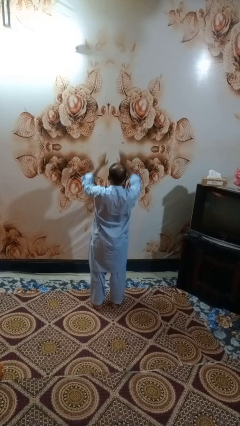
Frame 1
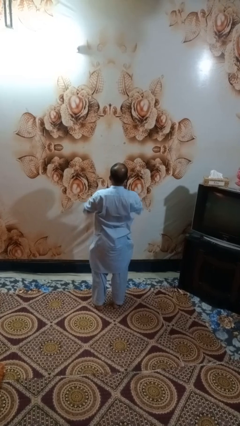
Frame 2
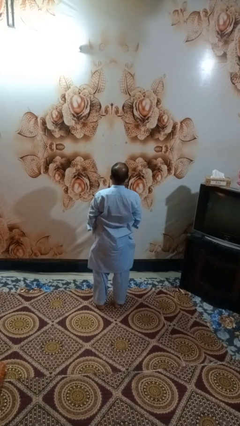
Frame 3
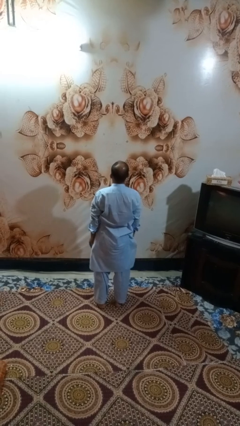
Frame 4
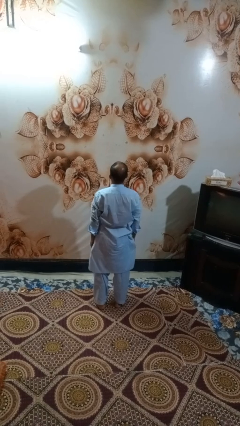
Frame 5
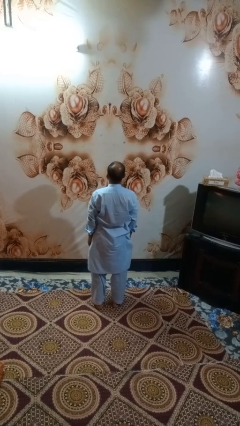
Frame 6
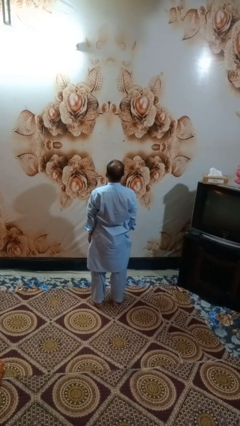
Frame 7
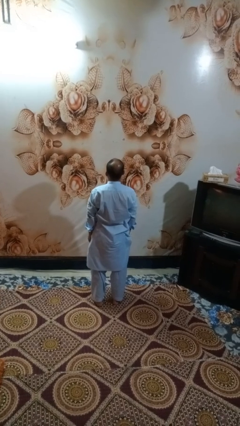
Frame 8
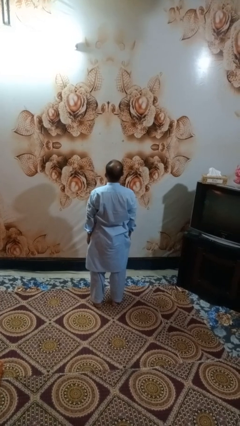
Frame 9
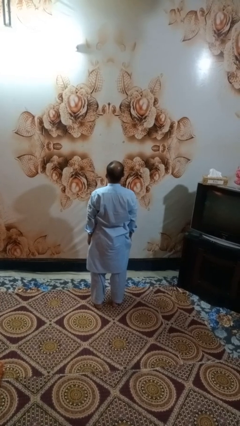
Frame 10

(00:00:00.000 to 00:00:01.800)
person gestures swipe down

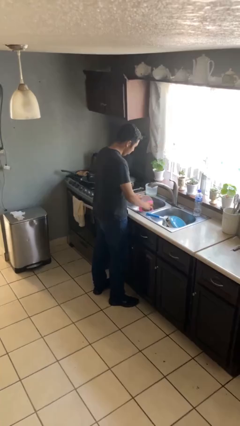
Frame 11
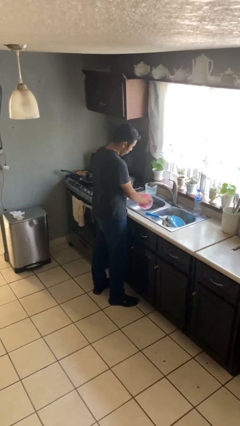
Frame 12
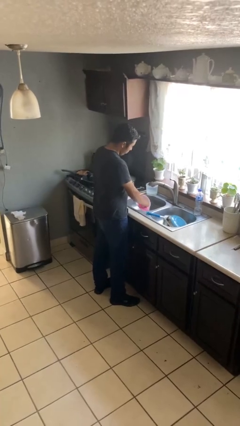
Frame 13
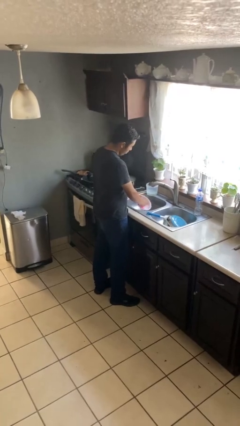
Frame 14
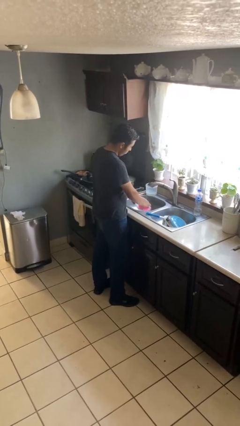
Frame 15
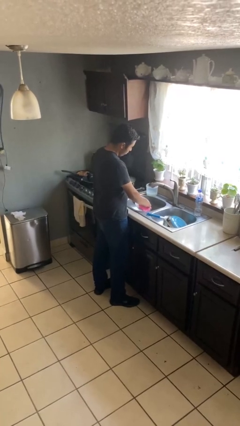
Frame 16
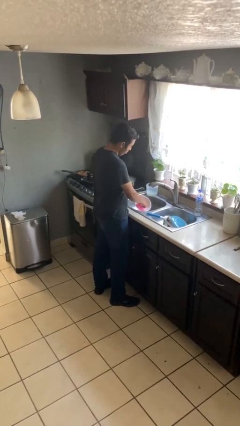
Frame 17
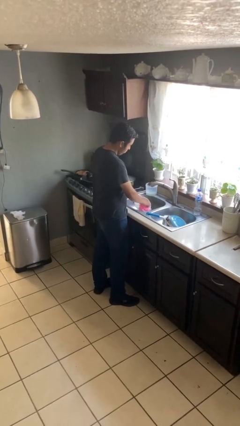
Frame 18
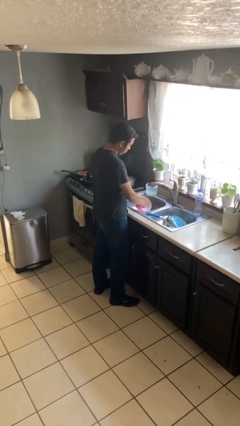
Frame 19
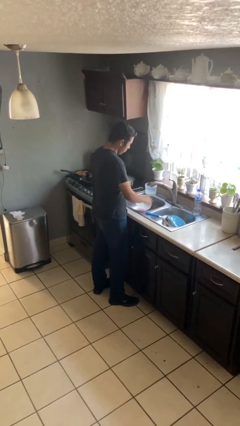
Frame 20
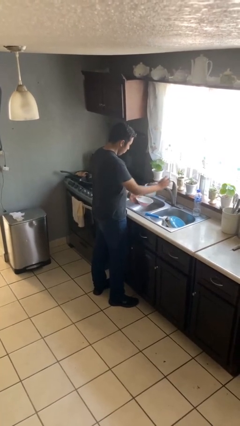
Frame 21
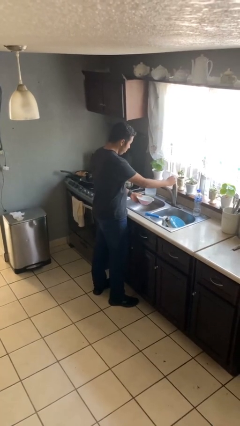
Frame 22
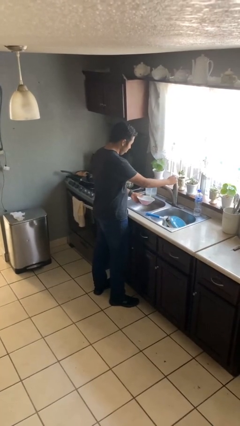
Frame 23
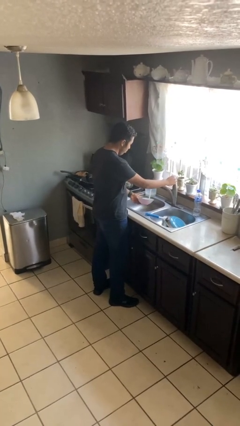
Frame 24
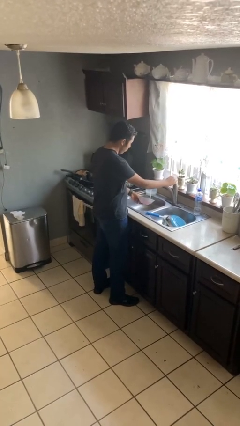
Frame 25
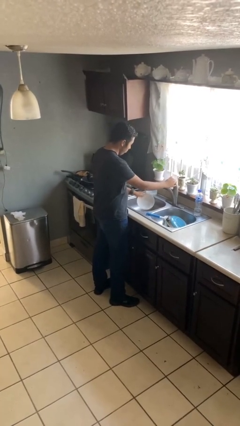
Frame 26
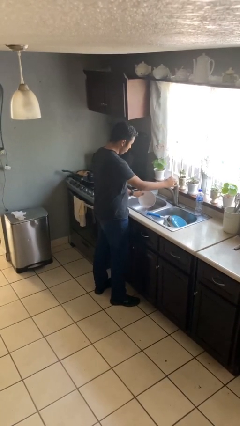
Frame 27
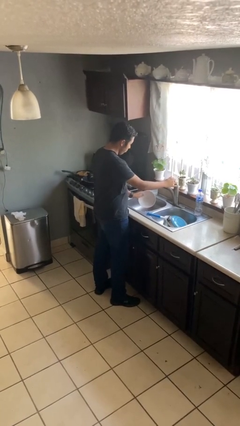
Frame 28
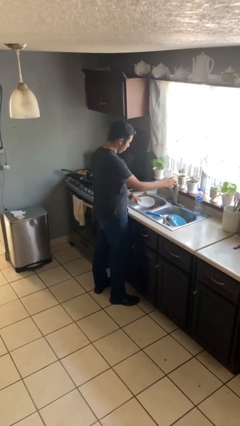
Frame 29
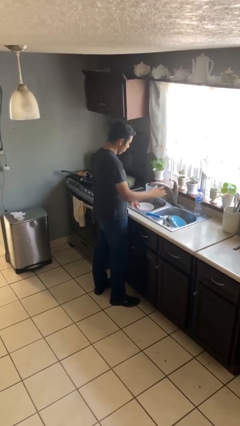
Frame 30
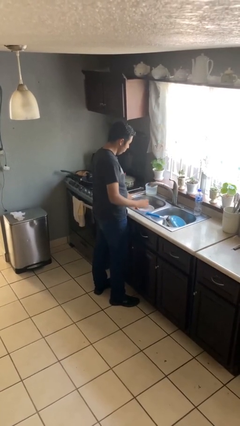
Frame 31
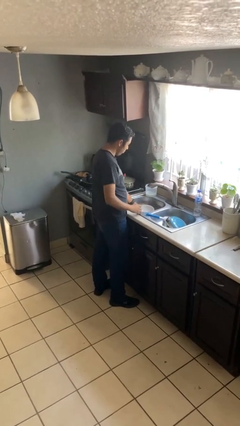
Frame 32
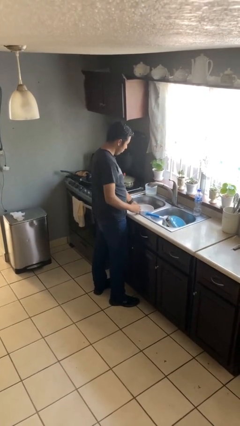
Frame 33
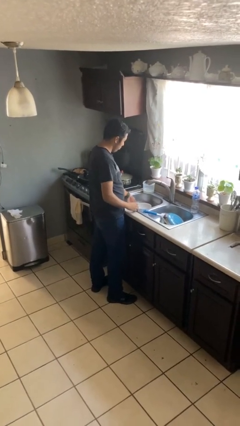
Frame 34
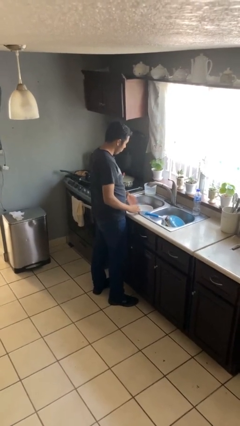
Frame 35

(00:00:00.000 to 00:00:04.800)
person washes dish

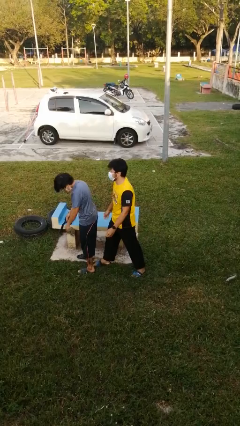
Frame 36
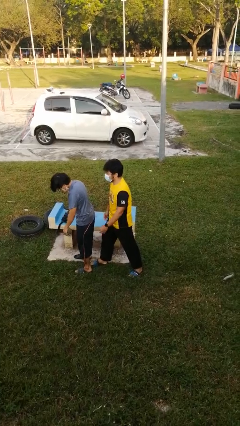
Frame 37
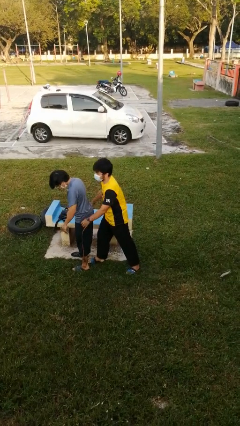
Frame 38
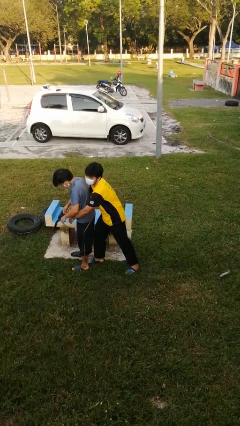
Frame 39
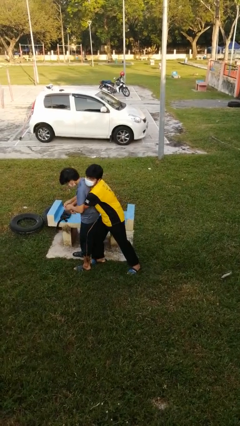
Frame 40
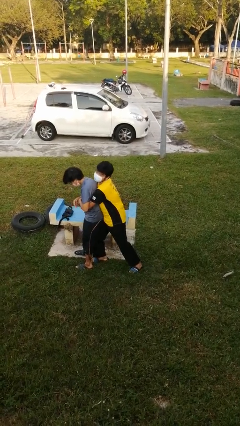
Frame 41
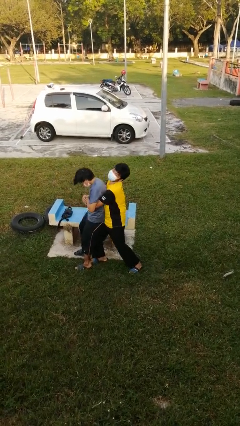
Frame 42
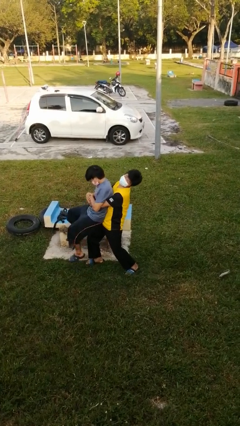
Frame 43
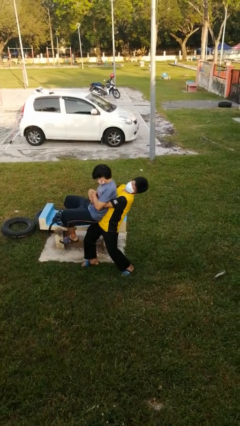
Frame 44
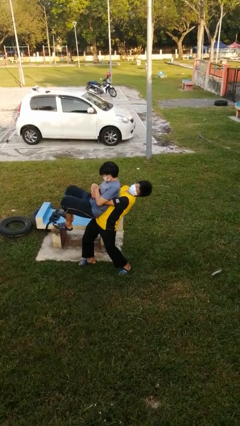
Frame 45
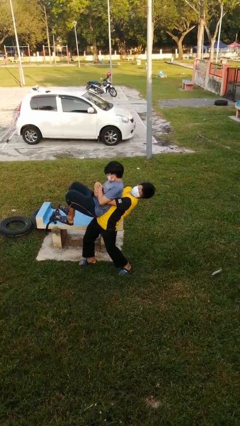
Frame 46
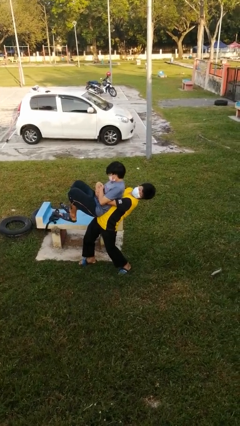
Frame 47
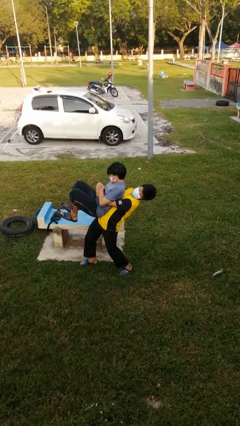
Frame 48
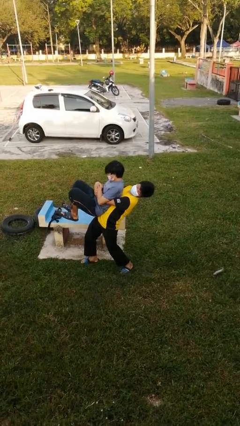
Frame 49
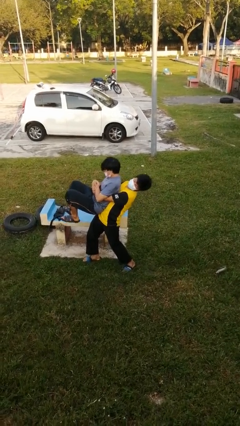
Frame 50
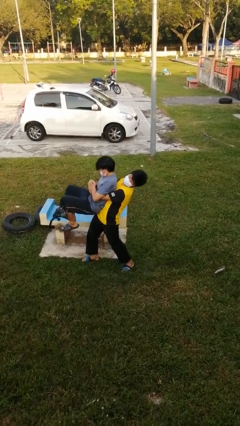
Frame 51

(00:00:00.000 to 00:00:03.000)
person picks up person

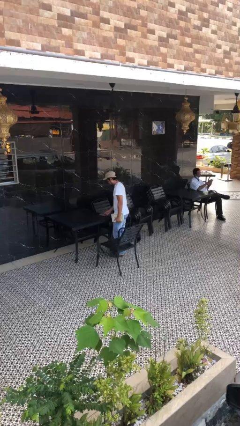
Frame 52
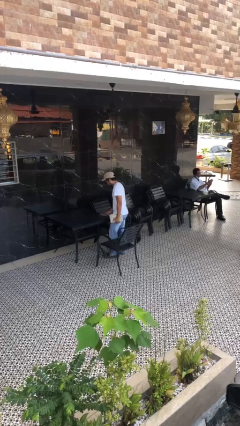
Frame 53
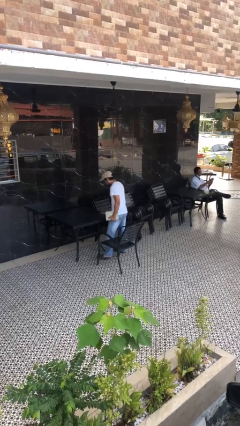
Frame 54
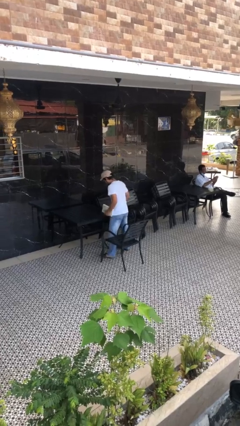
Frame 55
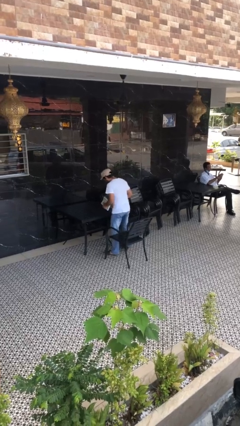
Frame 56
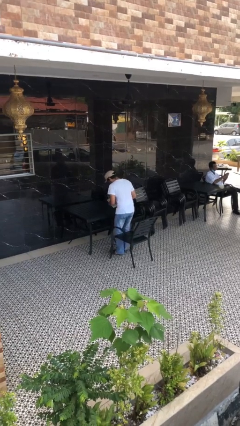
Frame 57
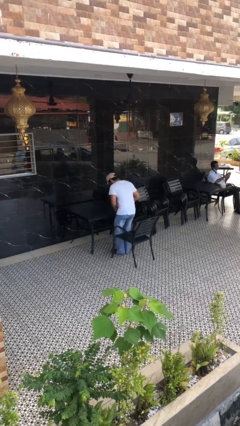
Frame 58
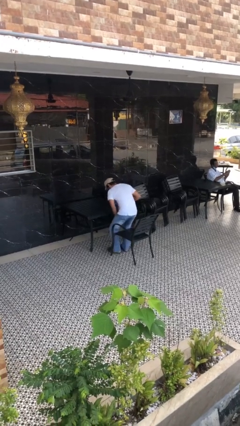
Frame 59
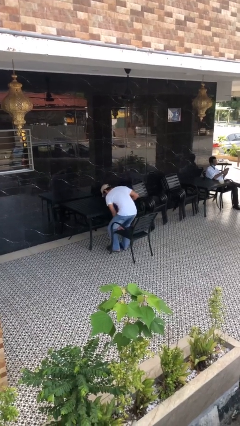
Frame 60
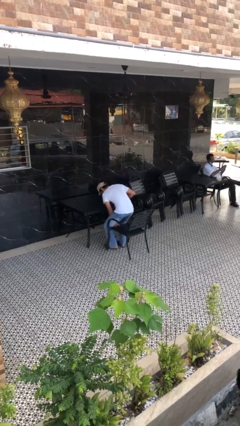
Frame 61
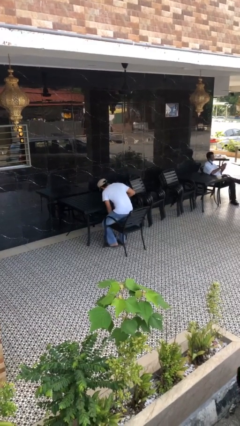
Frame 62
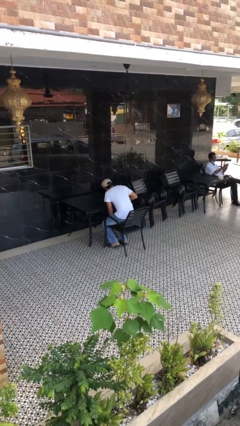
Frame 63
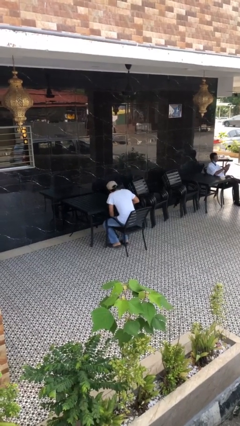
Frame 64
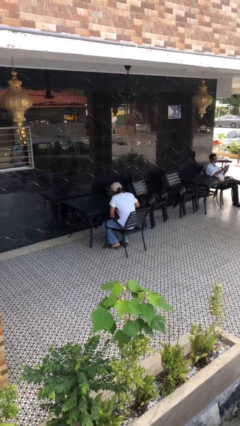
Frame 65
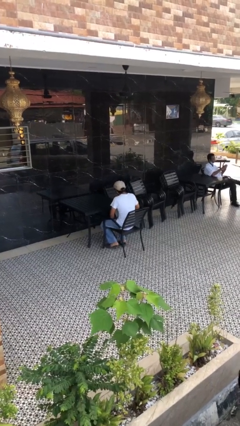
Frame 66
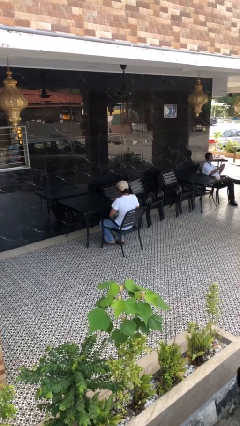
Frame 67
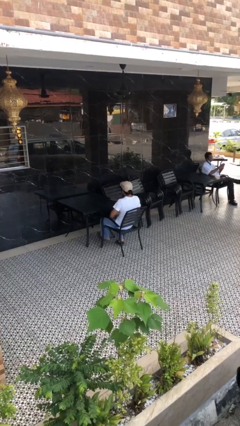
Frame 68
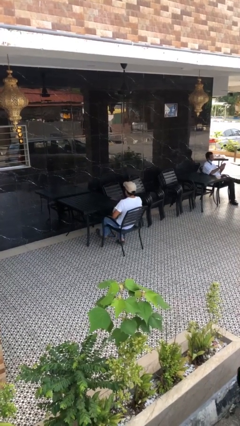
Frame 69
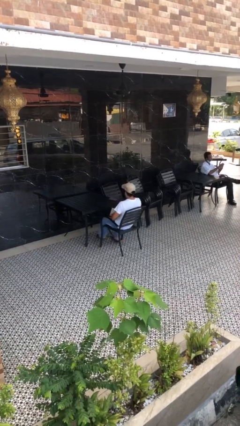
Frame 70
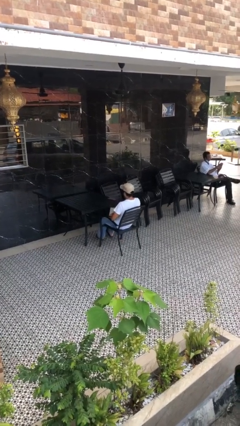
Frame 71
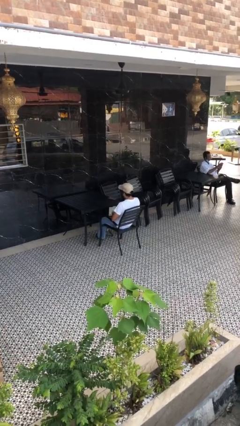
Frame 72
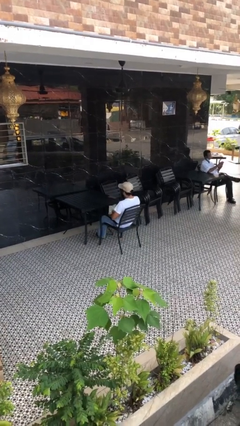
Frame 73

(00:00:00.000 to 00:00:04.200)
person sits down

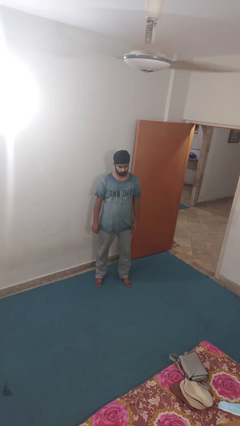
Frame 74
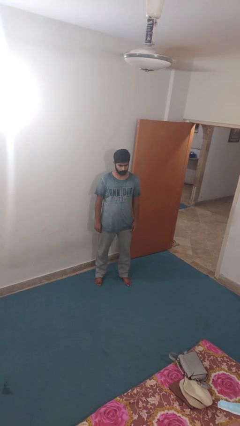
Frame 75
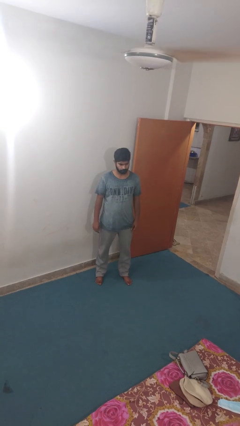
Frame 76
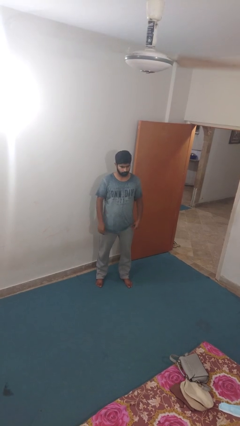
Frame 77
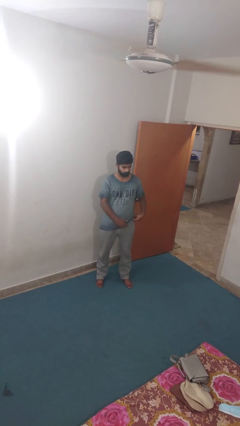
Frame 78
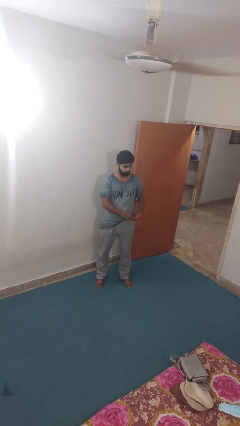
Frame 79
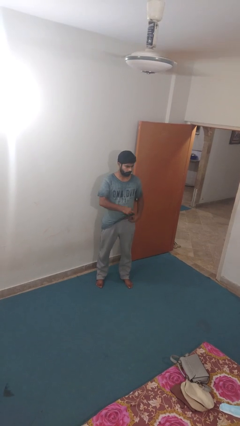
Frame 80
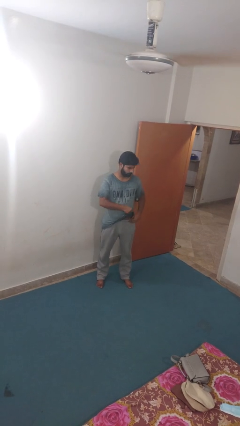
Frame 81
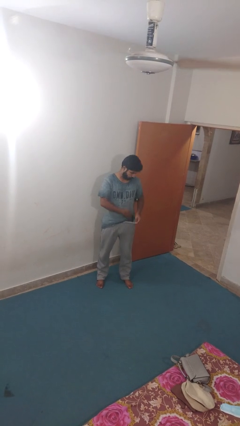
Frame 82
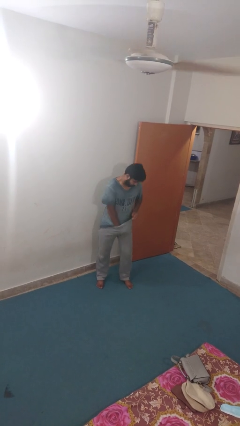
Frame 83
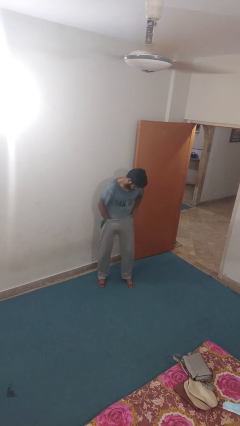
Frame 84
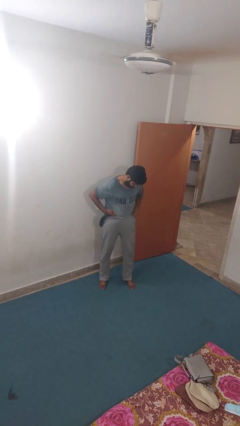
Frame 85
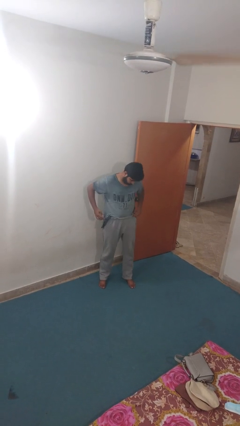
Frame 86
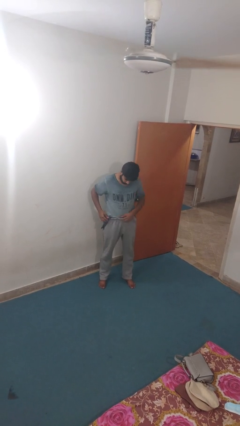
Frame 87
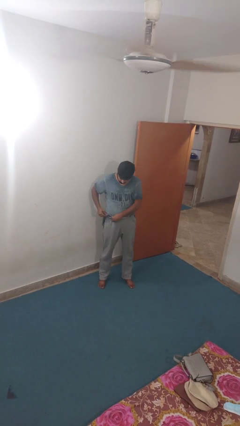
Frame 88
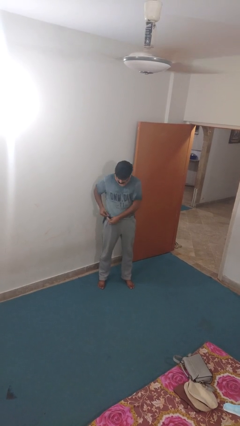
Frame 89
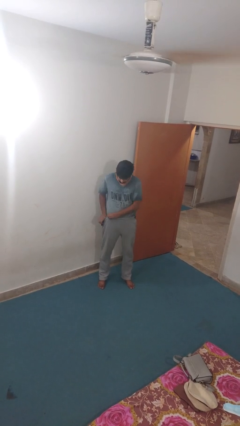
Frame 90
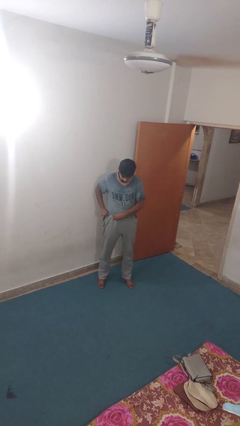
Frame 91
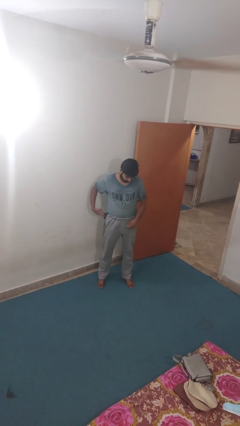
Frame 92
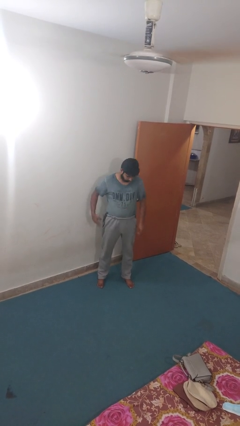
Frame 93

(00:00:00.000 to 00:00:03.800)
person tucks in shirt

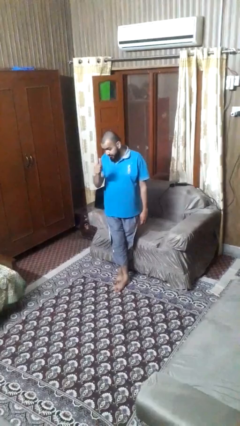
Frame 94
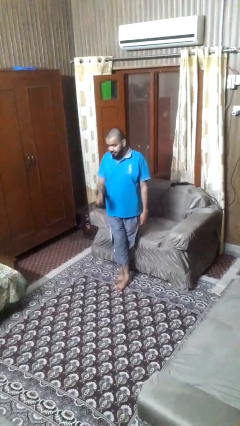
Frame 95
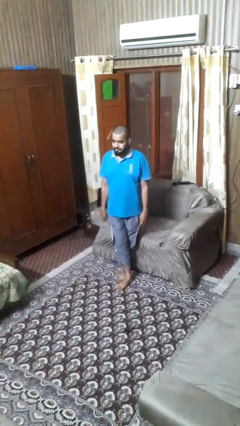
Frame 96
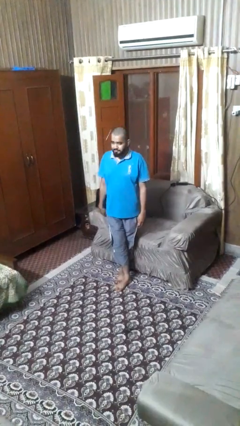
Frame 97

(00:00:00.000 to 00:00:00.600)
person gestures thumbs up
